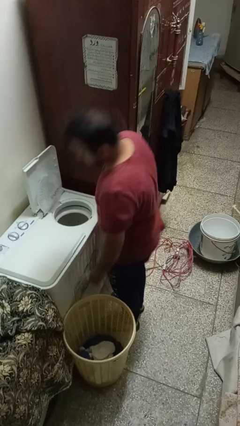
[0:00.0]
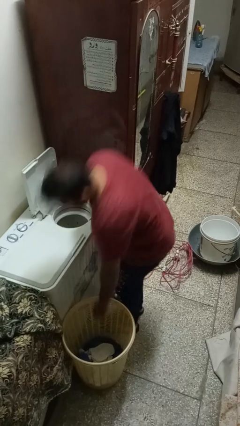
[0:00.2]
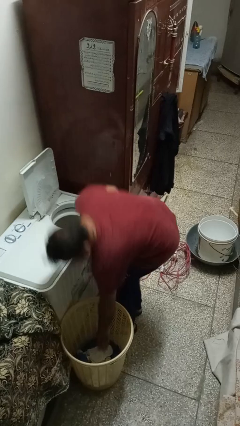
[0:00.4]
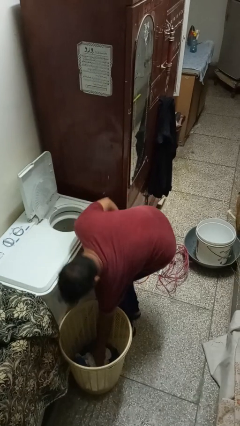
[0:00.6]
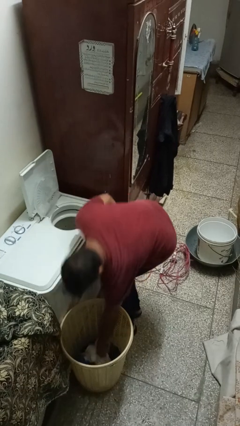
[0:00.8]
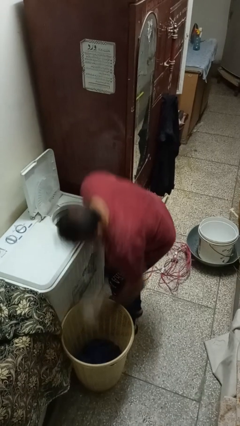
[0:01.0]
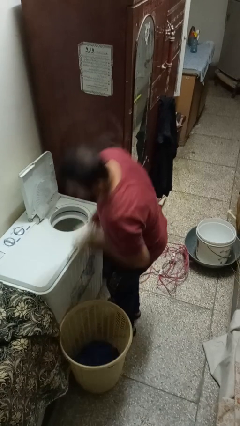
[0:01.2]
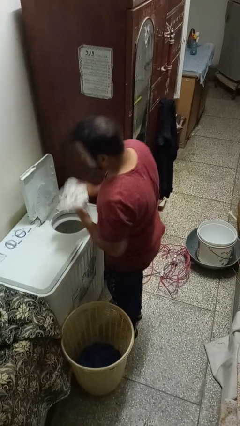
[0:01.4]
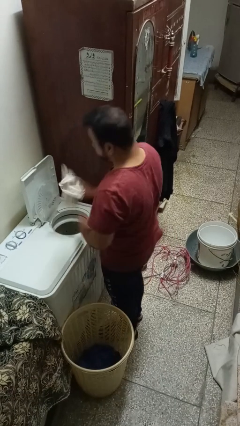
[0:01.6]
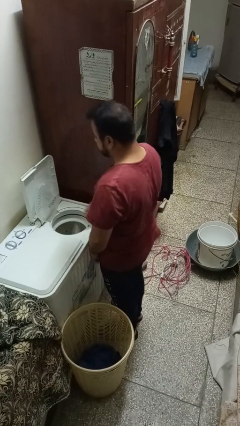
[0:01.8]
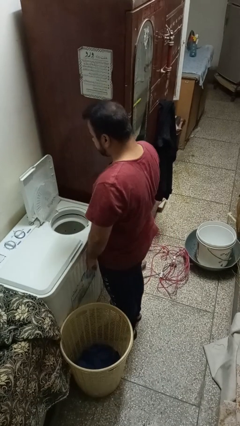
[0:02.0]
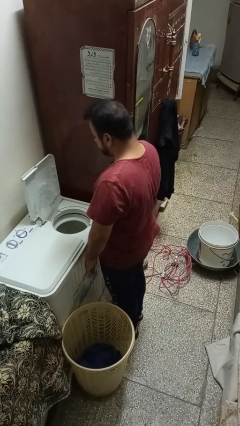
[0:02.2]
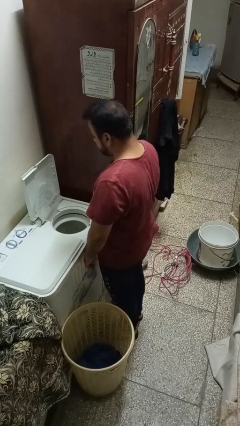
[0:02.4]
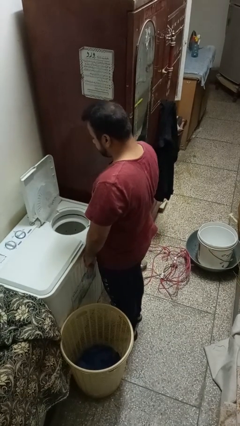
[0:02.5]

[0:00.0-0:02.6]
person loads dryer

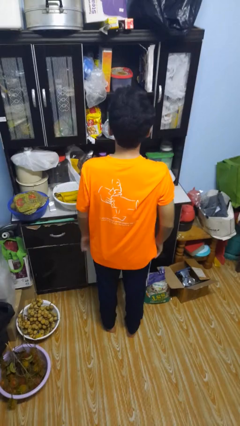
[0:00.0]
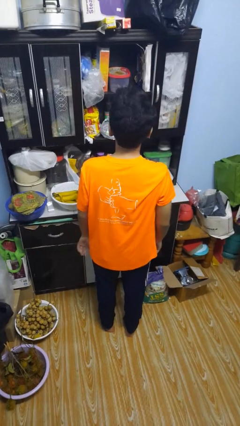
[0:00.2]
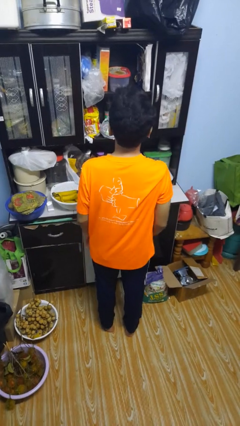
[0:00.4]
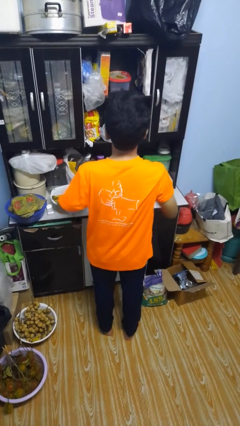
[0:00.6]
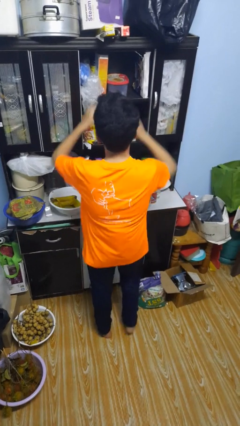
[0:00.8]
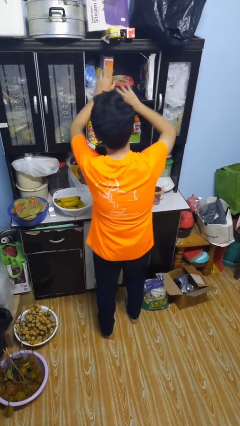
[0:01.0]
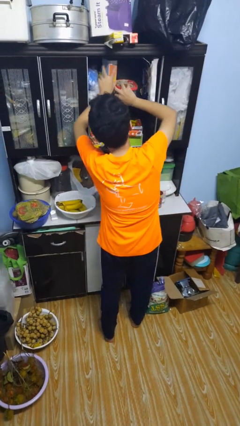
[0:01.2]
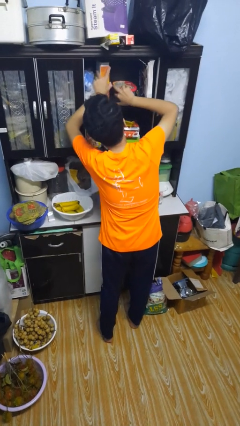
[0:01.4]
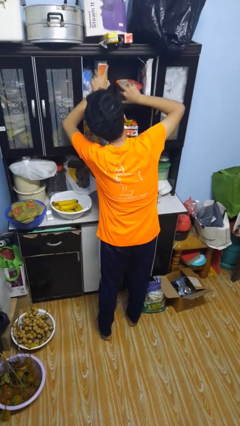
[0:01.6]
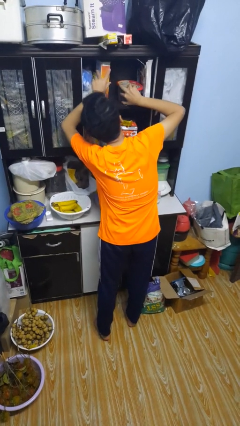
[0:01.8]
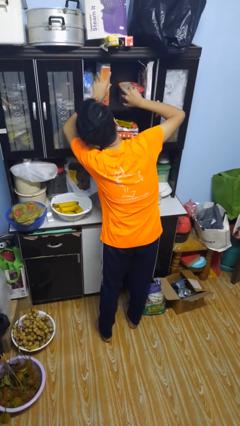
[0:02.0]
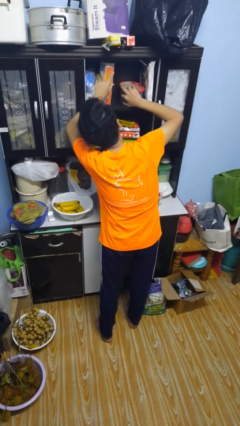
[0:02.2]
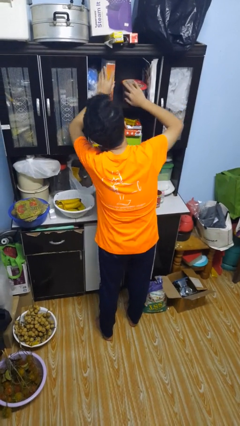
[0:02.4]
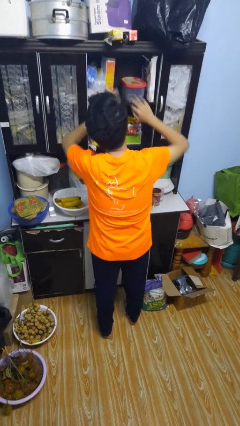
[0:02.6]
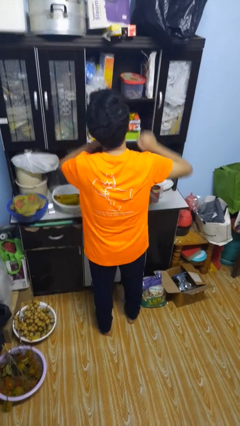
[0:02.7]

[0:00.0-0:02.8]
person searches in cabinet

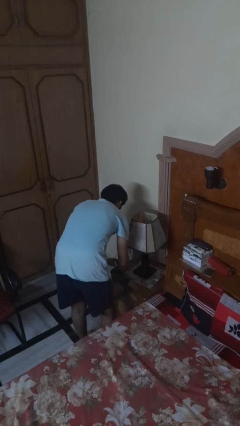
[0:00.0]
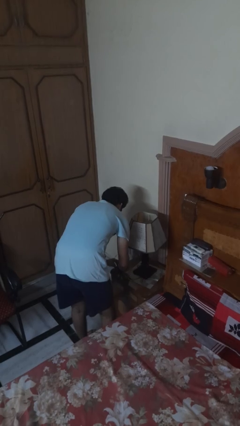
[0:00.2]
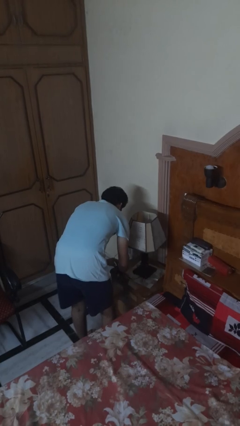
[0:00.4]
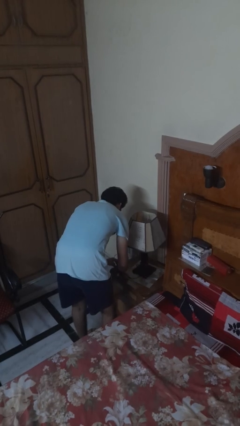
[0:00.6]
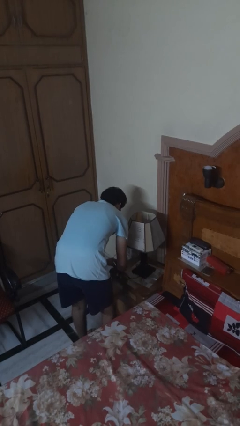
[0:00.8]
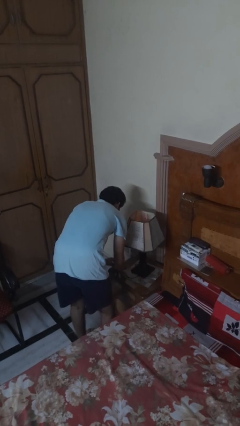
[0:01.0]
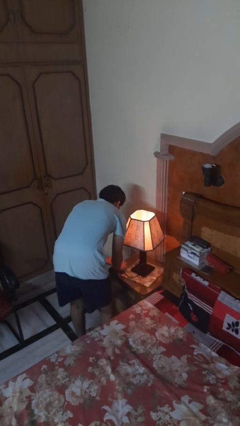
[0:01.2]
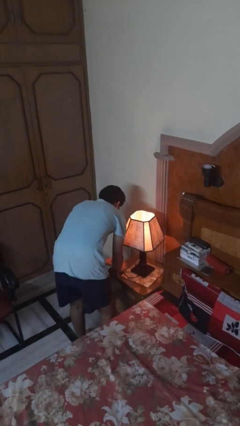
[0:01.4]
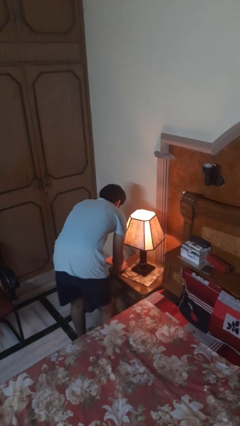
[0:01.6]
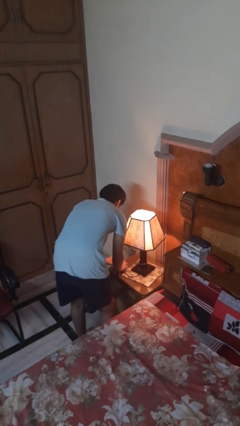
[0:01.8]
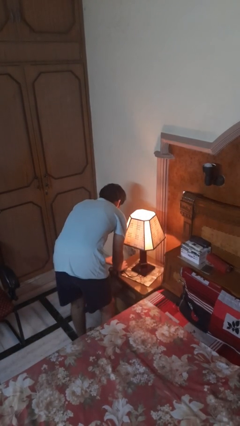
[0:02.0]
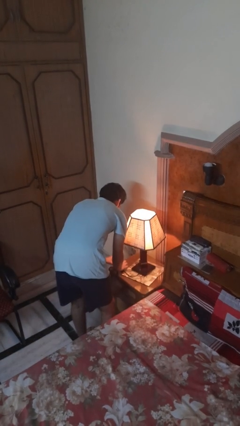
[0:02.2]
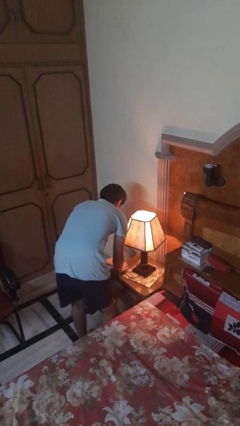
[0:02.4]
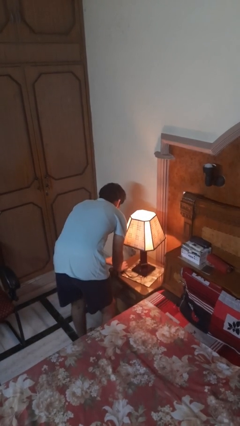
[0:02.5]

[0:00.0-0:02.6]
person turns on lamp

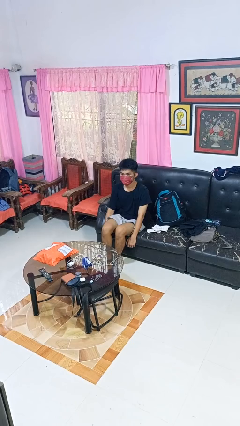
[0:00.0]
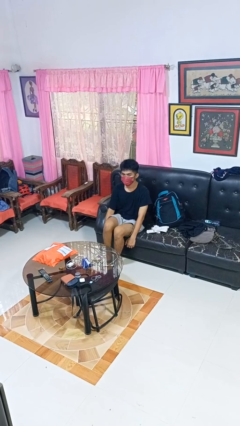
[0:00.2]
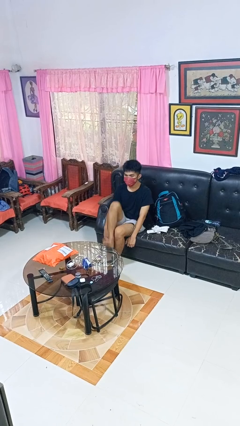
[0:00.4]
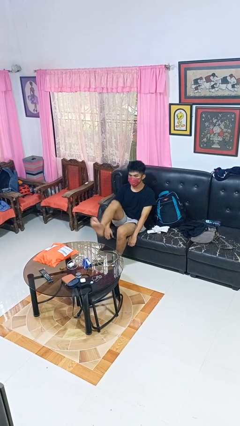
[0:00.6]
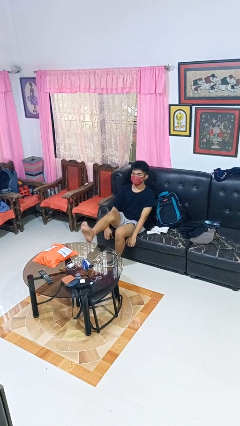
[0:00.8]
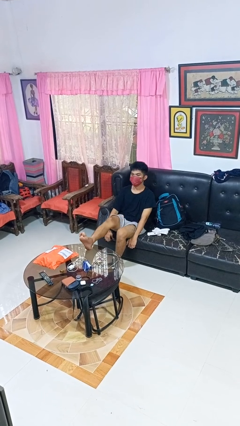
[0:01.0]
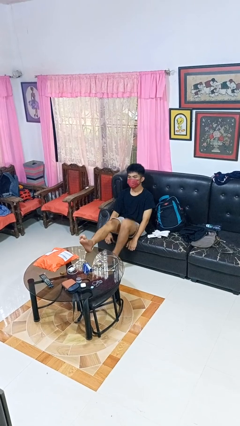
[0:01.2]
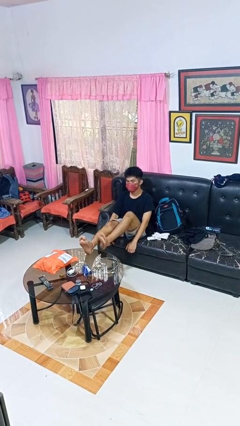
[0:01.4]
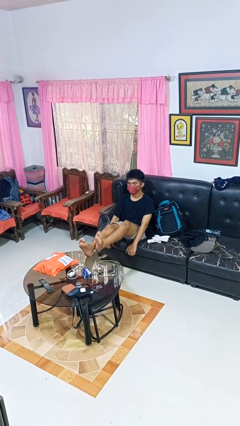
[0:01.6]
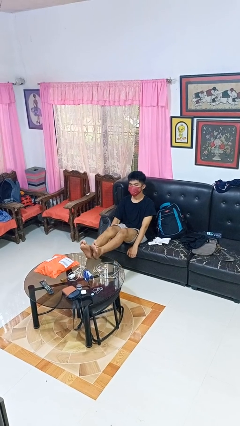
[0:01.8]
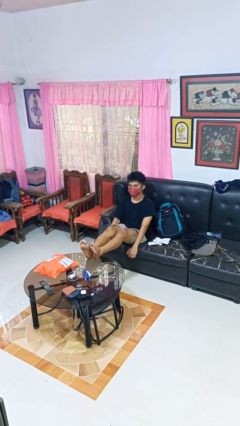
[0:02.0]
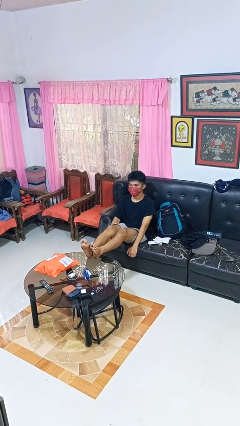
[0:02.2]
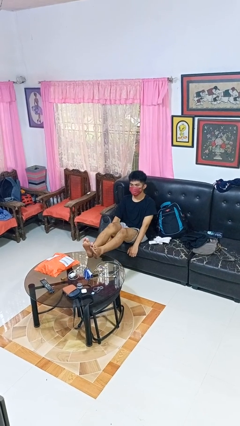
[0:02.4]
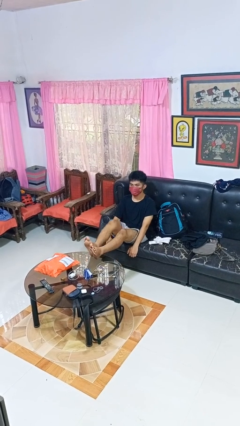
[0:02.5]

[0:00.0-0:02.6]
person puts feet up

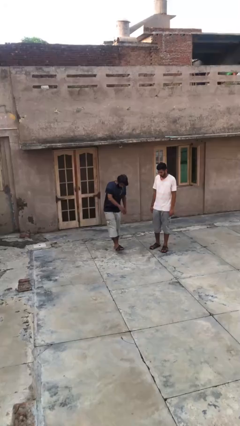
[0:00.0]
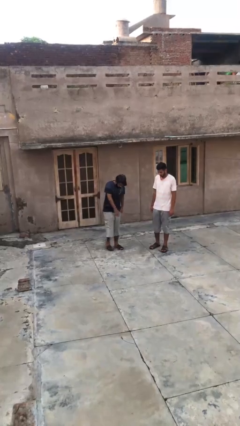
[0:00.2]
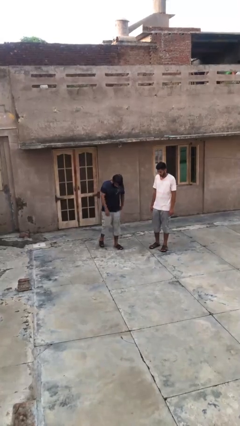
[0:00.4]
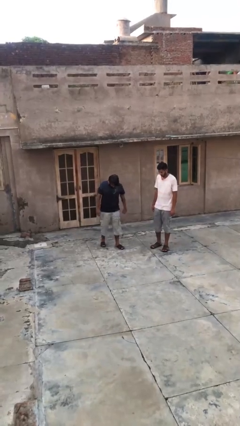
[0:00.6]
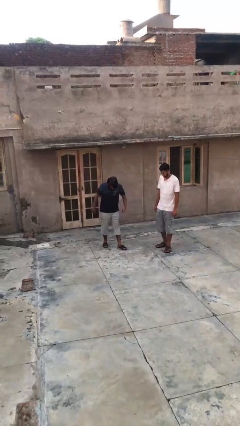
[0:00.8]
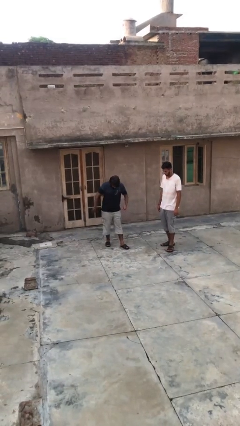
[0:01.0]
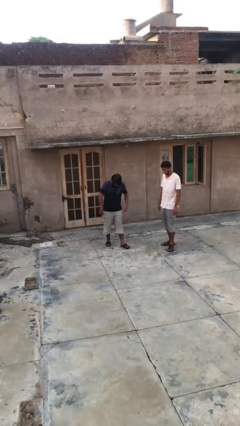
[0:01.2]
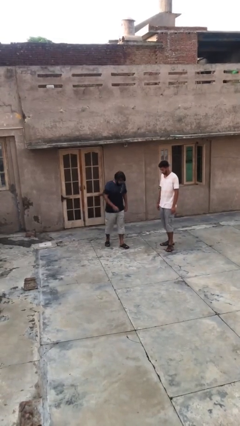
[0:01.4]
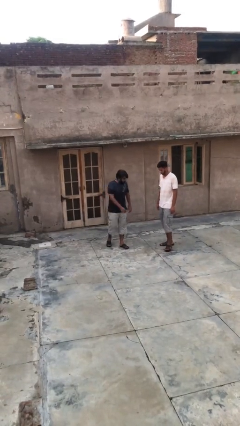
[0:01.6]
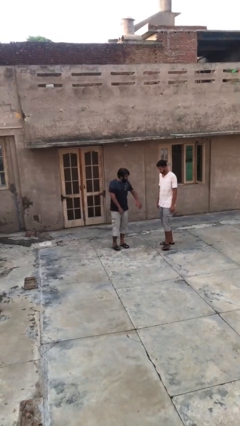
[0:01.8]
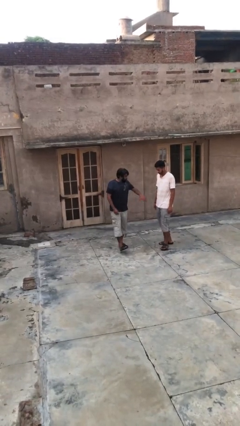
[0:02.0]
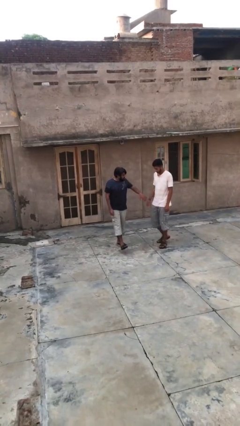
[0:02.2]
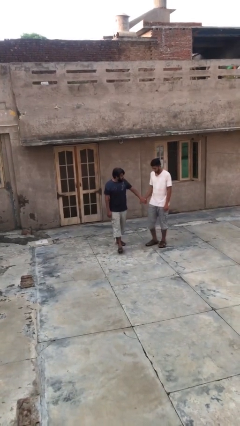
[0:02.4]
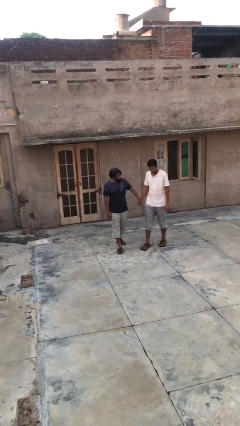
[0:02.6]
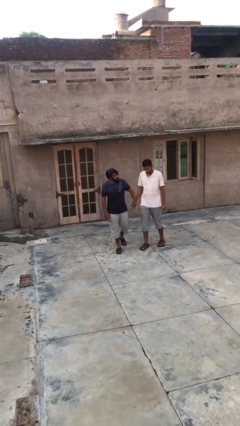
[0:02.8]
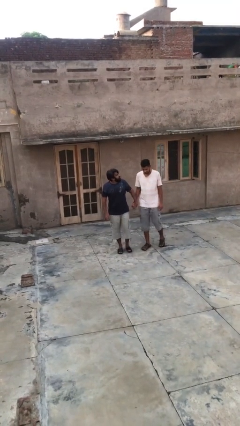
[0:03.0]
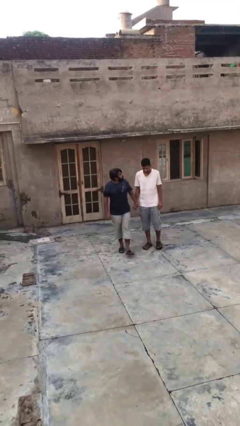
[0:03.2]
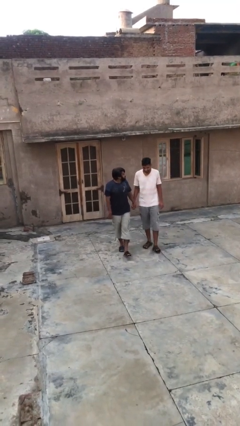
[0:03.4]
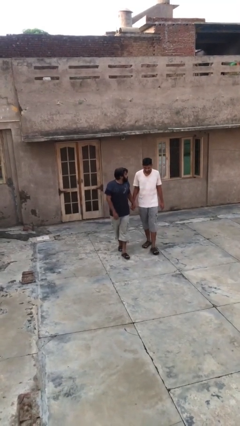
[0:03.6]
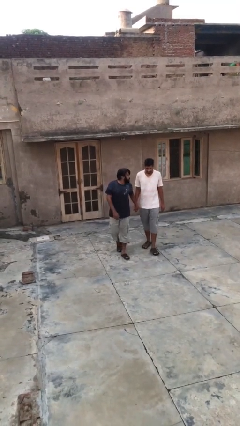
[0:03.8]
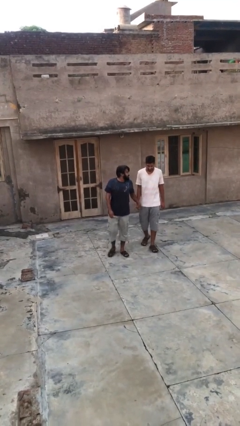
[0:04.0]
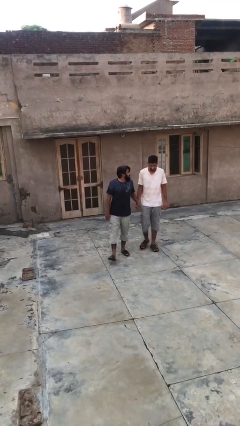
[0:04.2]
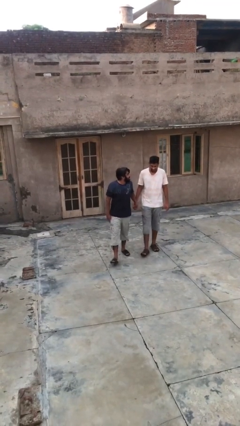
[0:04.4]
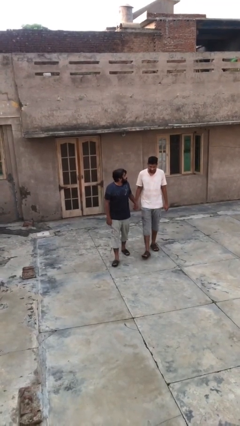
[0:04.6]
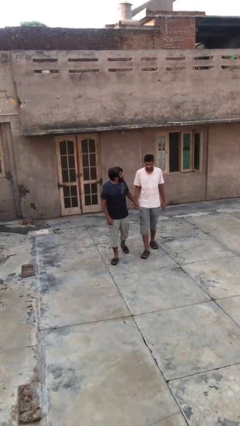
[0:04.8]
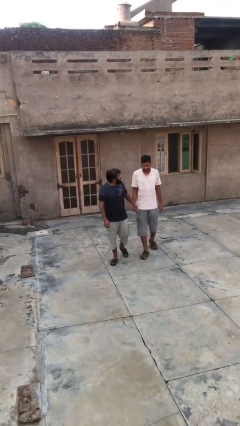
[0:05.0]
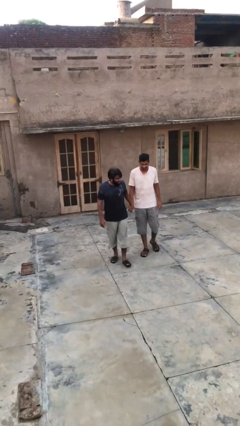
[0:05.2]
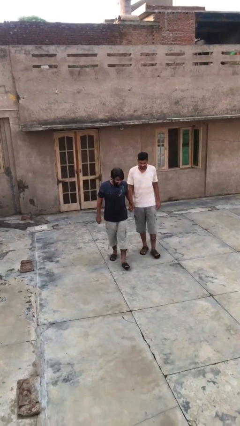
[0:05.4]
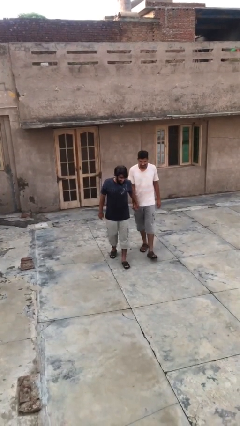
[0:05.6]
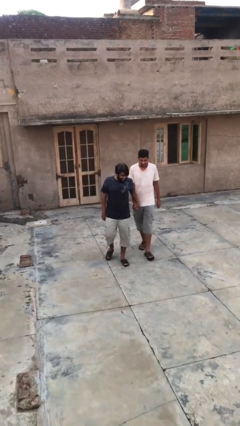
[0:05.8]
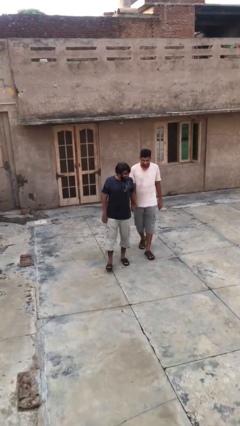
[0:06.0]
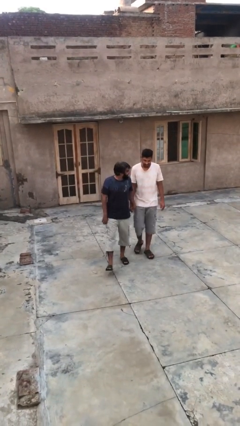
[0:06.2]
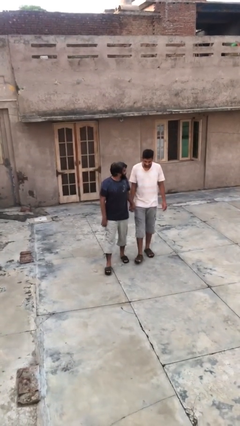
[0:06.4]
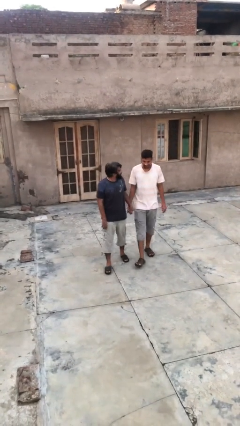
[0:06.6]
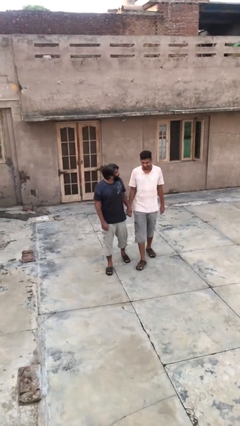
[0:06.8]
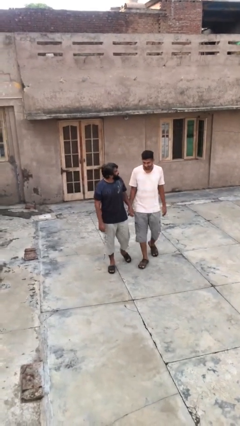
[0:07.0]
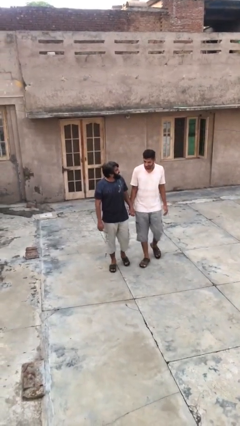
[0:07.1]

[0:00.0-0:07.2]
person holds hand
